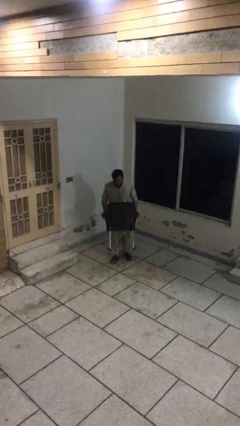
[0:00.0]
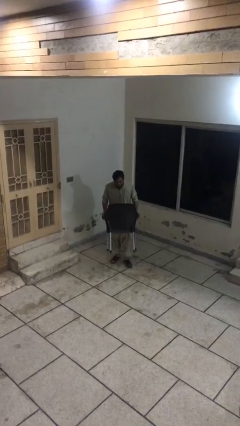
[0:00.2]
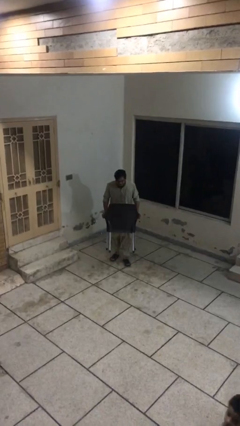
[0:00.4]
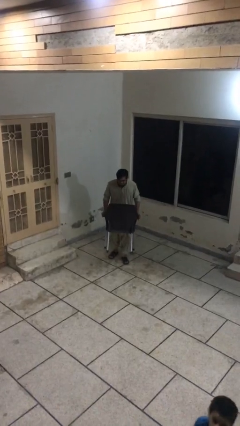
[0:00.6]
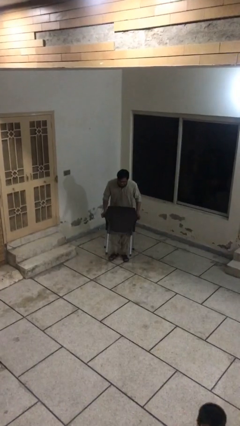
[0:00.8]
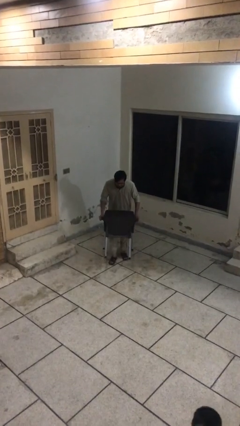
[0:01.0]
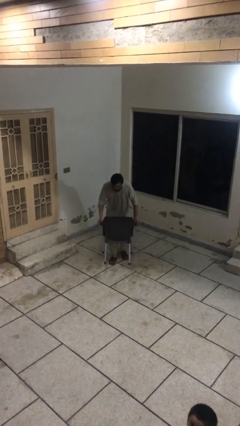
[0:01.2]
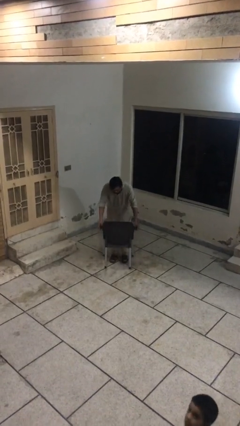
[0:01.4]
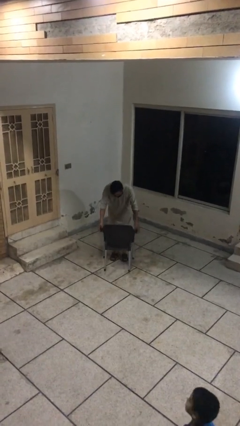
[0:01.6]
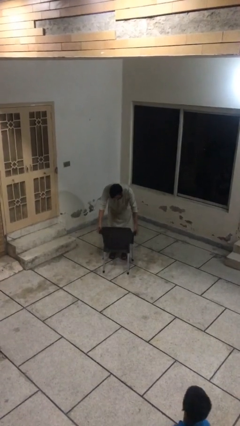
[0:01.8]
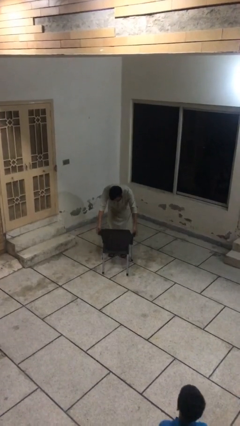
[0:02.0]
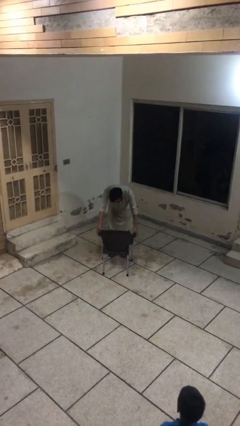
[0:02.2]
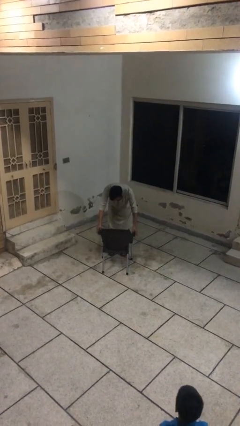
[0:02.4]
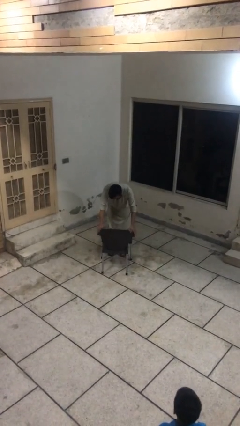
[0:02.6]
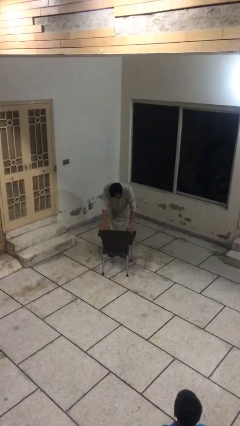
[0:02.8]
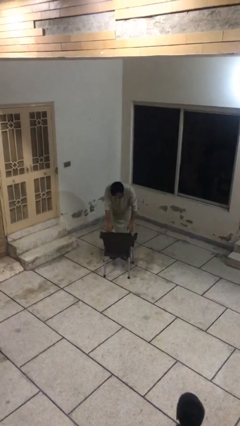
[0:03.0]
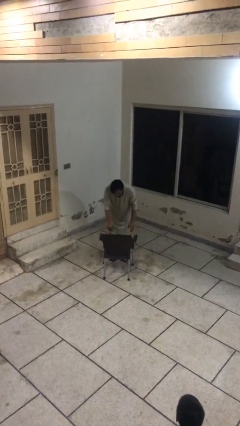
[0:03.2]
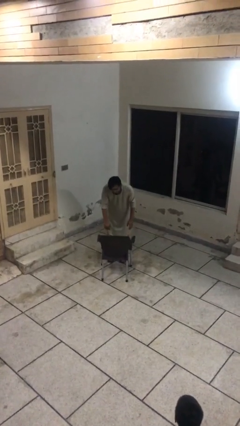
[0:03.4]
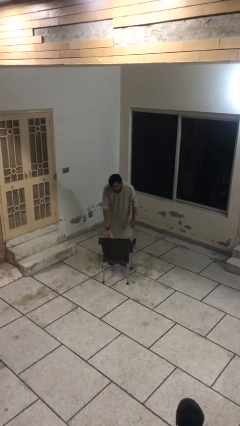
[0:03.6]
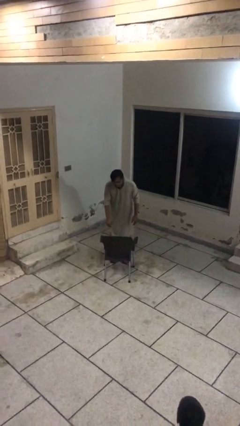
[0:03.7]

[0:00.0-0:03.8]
person puts down object on floor

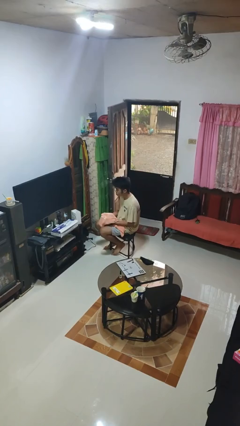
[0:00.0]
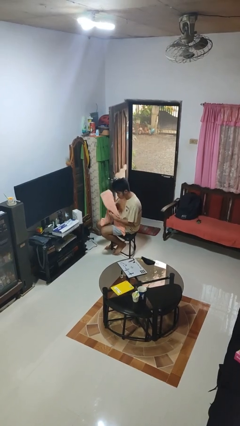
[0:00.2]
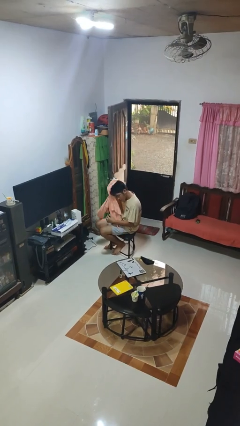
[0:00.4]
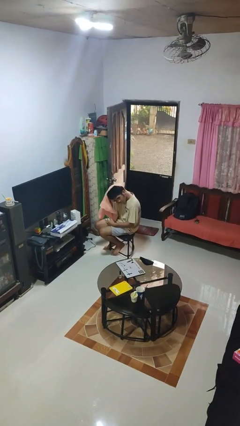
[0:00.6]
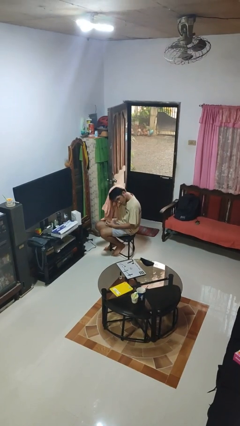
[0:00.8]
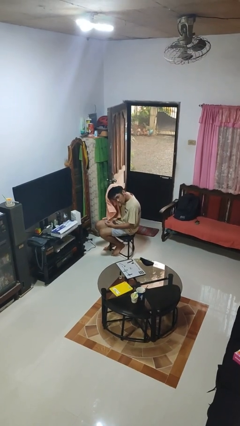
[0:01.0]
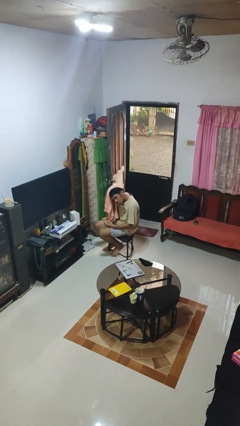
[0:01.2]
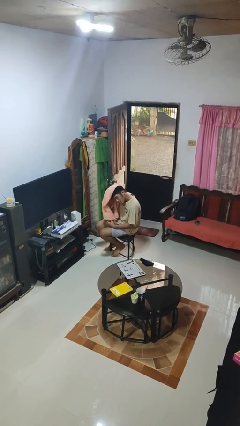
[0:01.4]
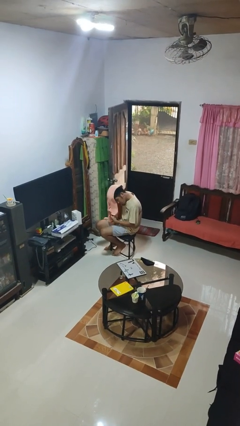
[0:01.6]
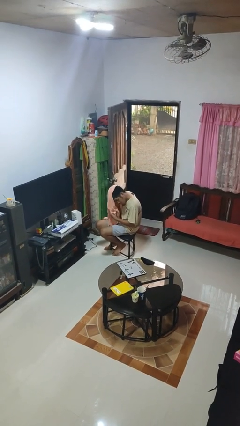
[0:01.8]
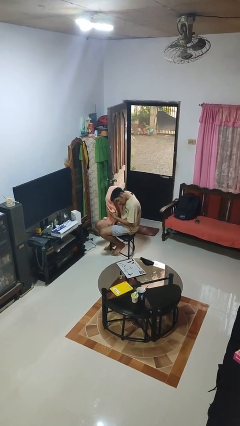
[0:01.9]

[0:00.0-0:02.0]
person dries hair with towel

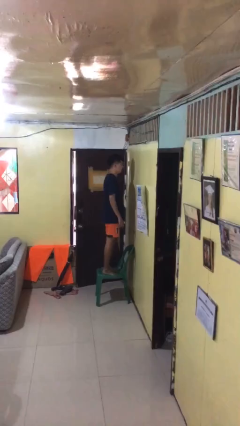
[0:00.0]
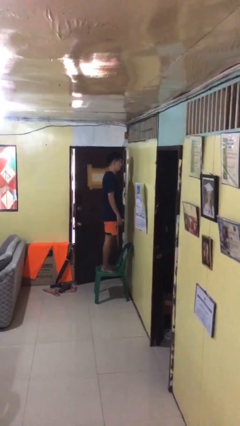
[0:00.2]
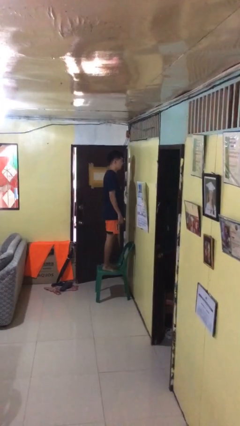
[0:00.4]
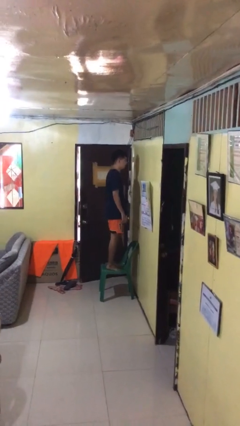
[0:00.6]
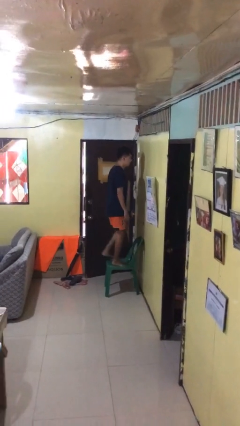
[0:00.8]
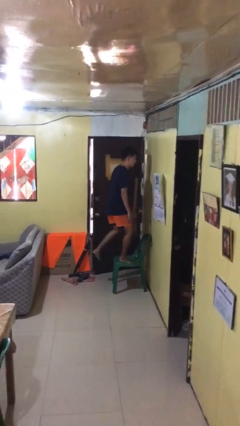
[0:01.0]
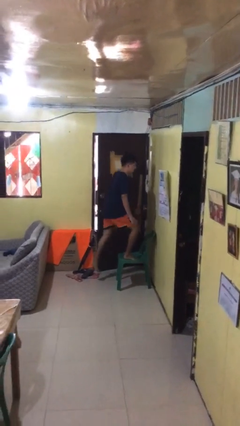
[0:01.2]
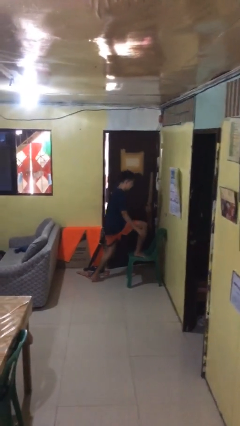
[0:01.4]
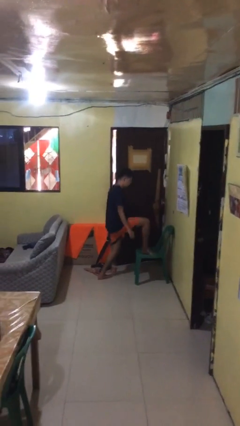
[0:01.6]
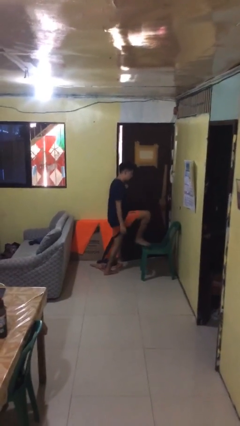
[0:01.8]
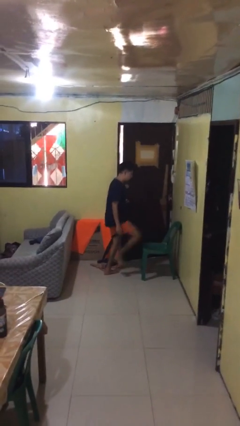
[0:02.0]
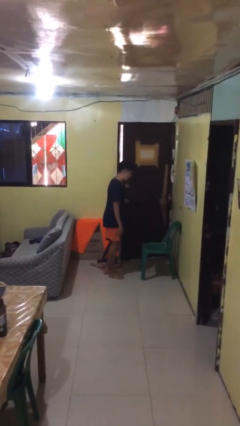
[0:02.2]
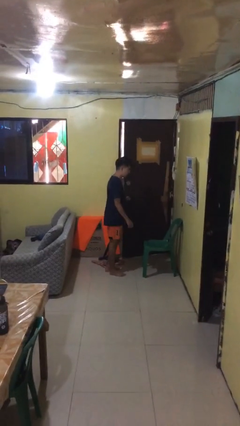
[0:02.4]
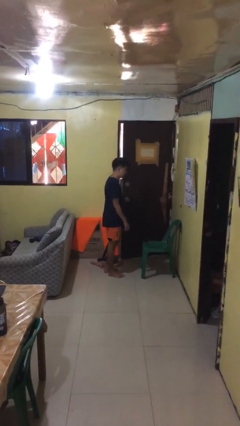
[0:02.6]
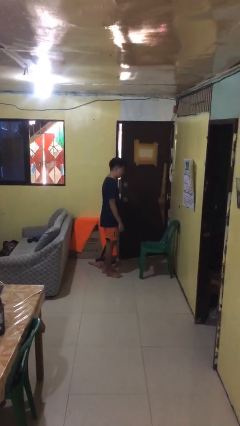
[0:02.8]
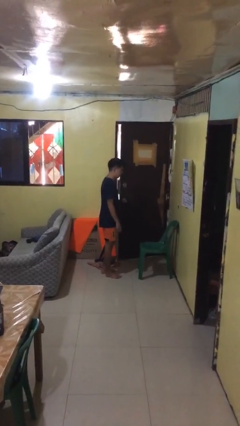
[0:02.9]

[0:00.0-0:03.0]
person climbs off chair

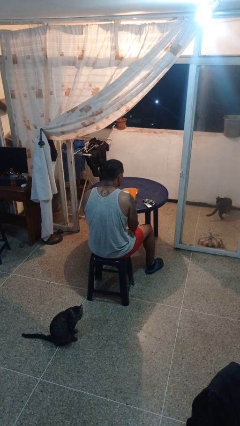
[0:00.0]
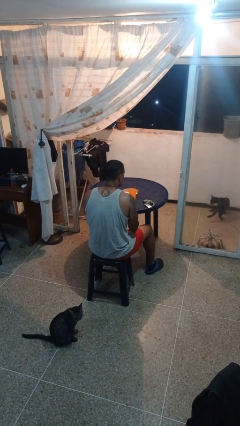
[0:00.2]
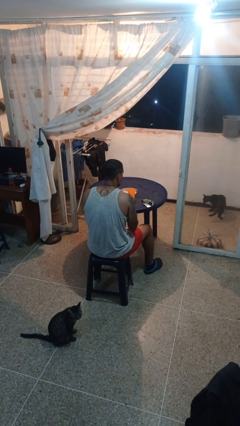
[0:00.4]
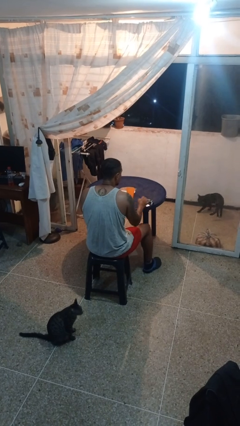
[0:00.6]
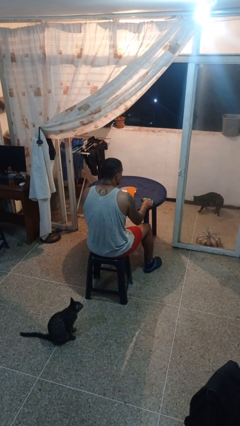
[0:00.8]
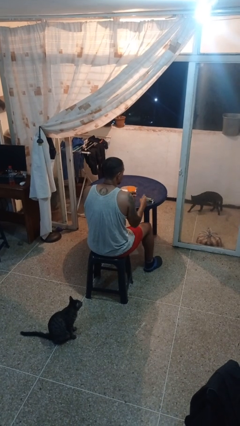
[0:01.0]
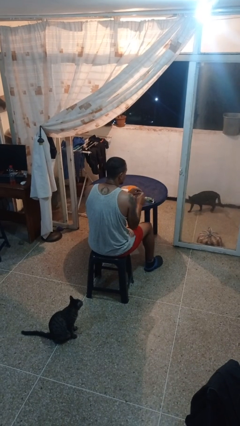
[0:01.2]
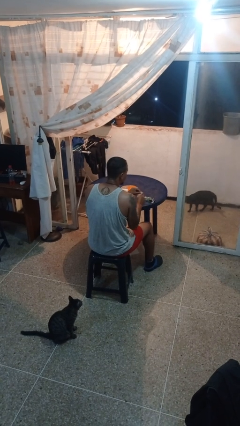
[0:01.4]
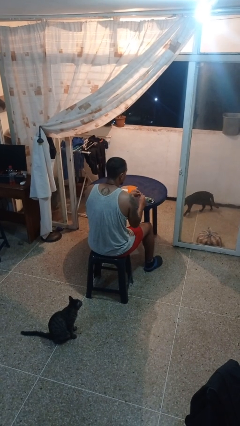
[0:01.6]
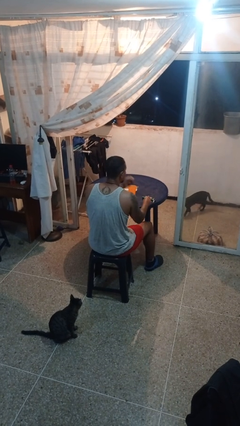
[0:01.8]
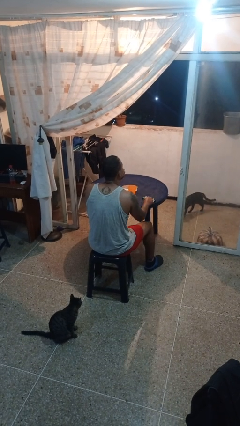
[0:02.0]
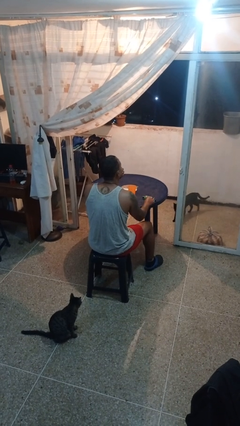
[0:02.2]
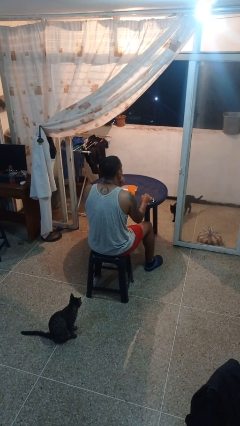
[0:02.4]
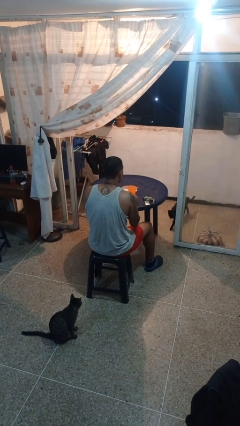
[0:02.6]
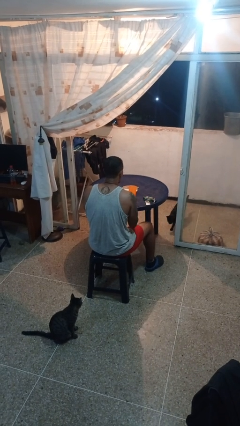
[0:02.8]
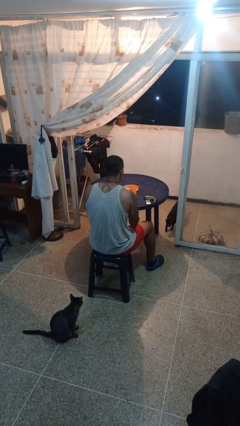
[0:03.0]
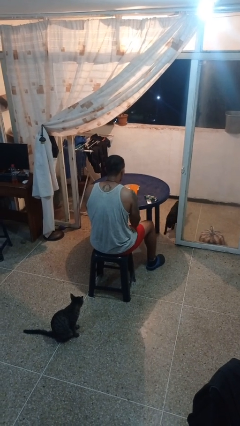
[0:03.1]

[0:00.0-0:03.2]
person takes medicine pills

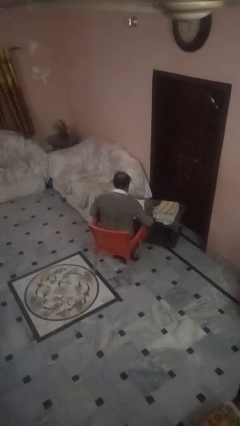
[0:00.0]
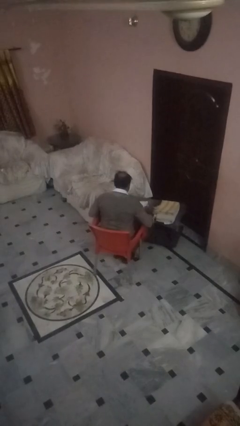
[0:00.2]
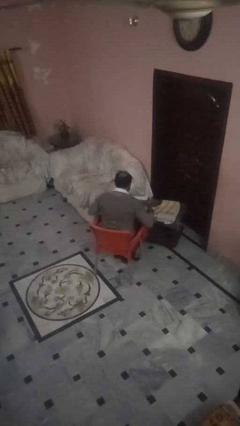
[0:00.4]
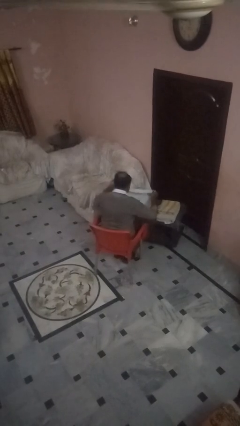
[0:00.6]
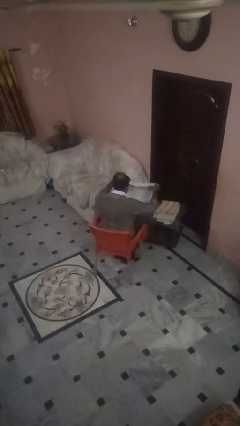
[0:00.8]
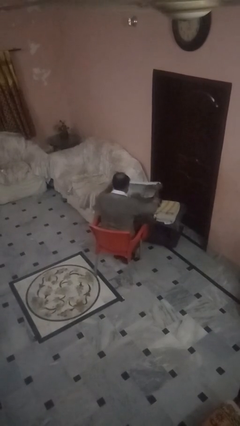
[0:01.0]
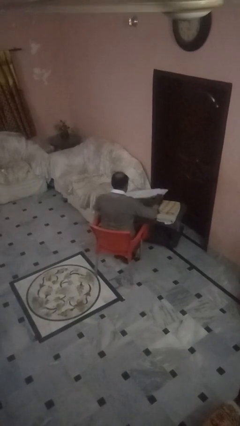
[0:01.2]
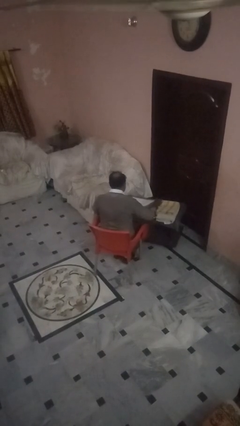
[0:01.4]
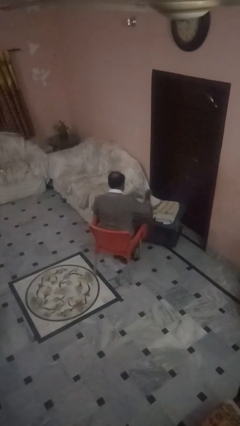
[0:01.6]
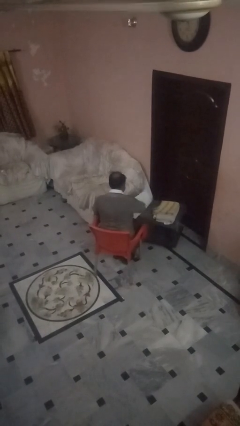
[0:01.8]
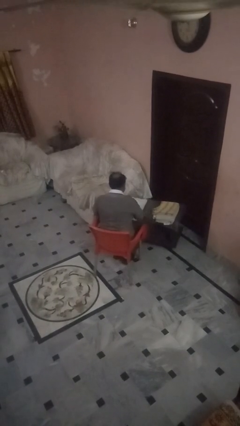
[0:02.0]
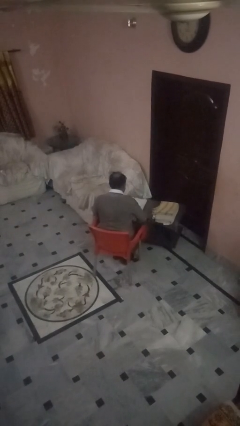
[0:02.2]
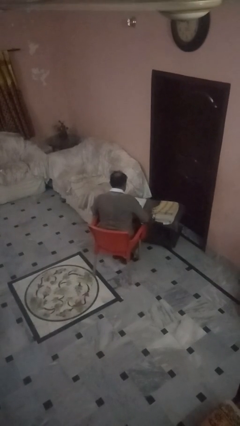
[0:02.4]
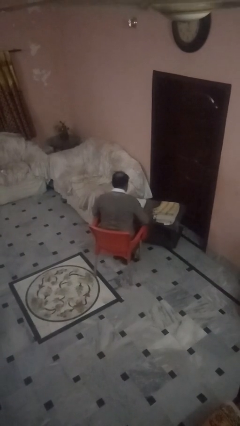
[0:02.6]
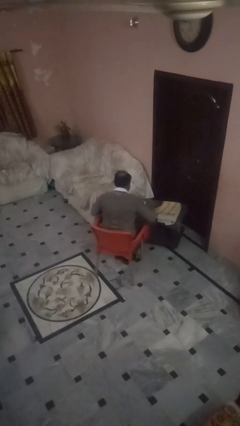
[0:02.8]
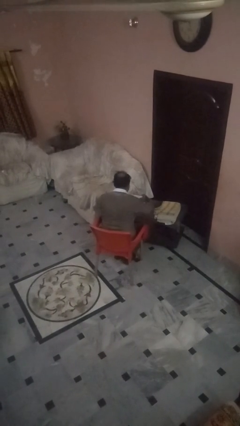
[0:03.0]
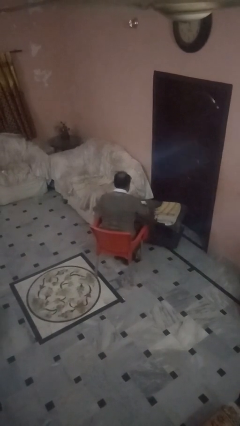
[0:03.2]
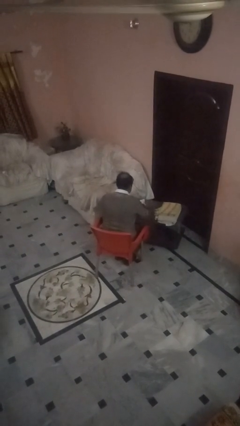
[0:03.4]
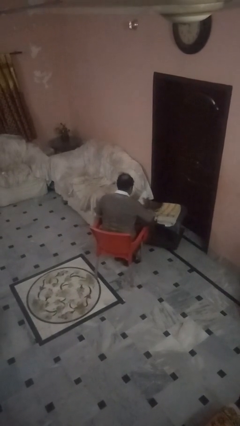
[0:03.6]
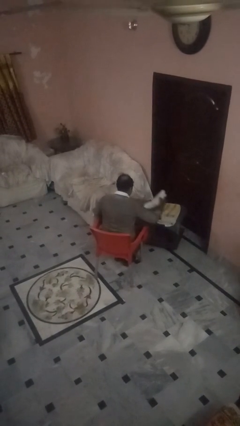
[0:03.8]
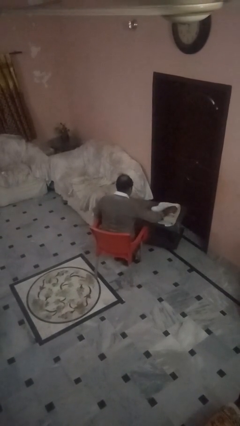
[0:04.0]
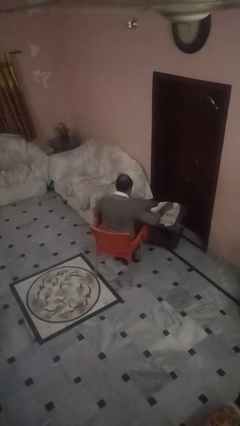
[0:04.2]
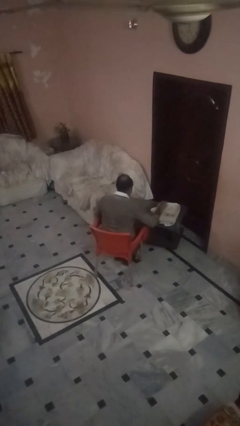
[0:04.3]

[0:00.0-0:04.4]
person folds towel

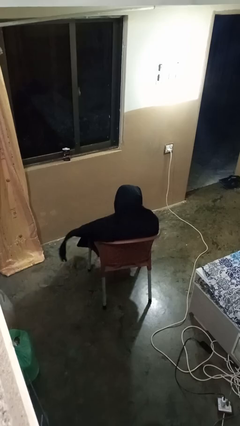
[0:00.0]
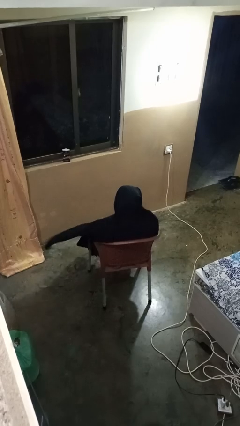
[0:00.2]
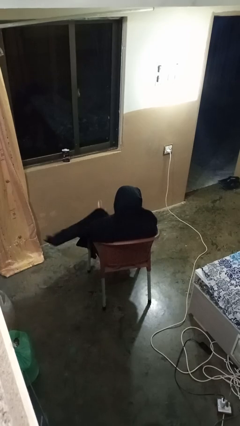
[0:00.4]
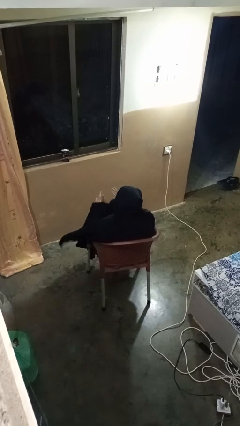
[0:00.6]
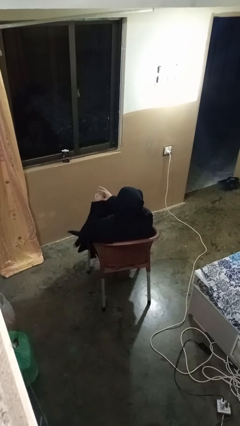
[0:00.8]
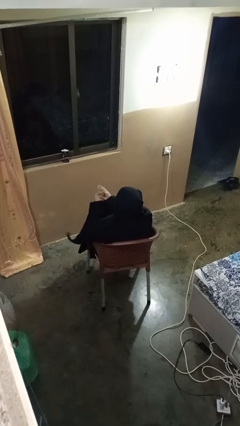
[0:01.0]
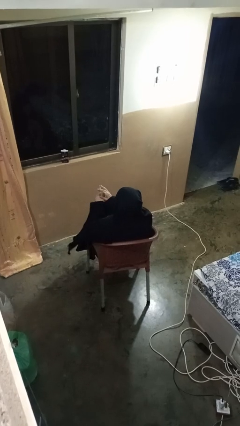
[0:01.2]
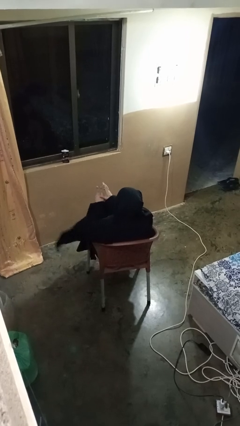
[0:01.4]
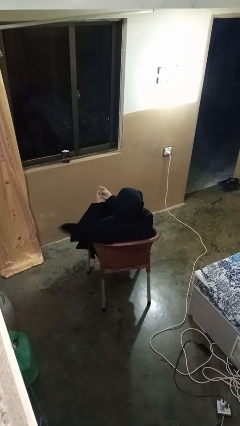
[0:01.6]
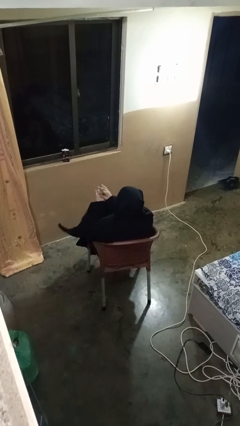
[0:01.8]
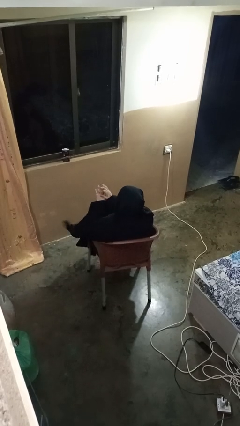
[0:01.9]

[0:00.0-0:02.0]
person cracks knuckles
